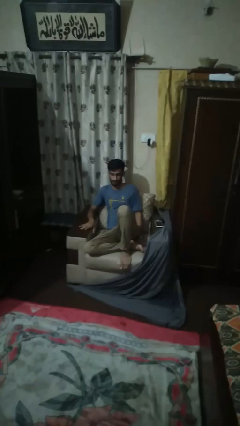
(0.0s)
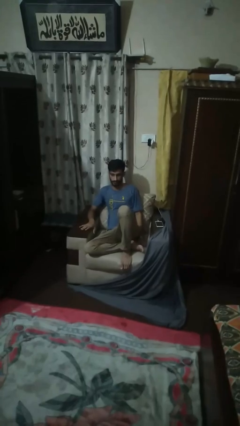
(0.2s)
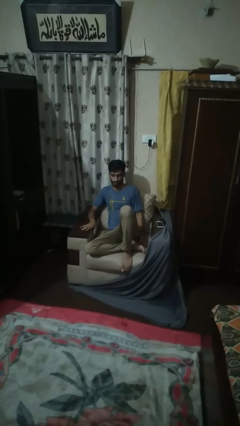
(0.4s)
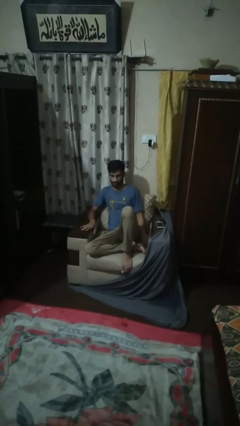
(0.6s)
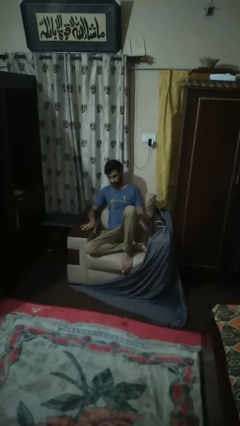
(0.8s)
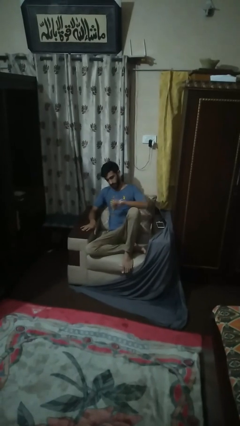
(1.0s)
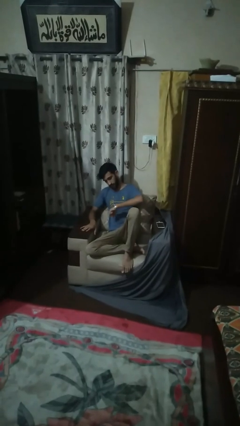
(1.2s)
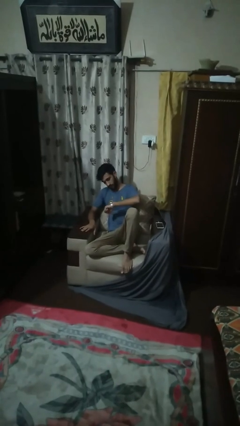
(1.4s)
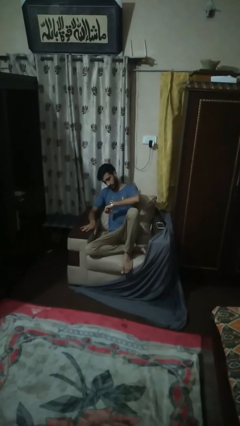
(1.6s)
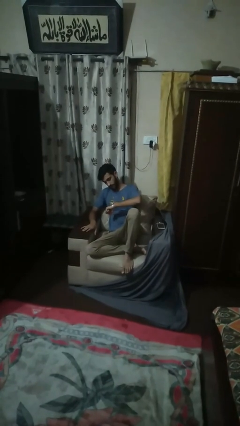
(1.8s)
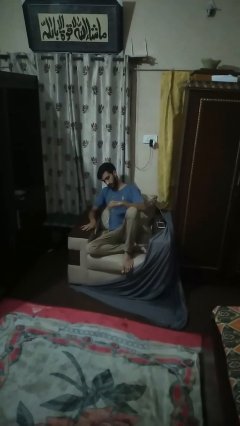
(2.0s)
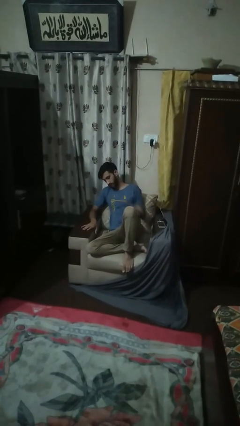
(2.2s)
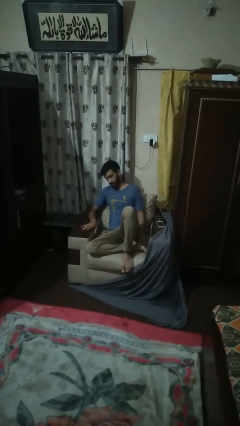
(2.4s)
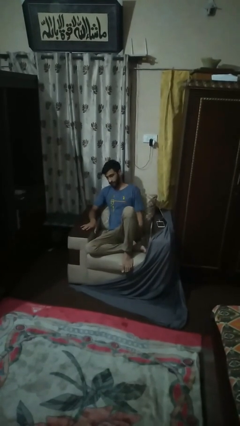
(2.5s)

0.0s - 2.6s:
person looks at wristwatch

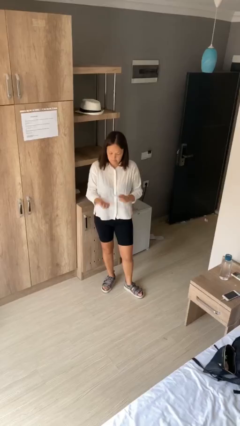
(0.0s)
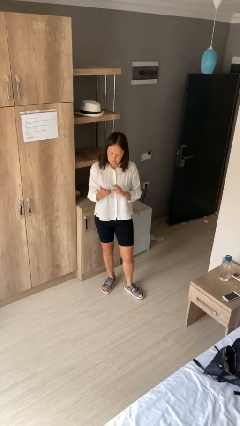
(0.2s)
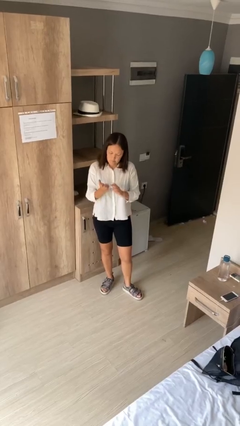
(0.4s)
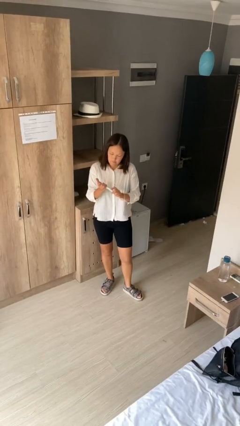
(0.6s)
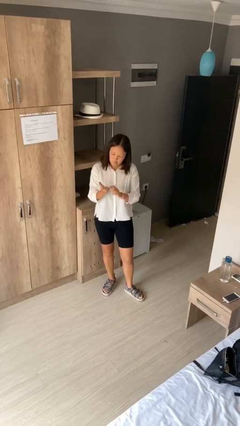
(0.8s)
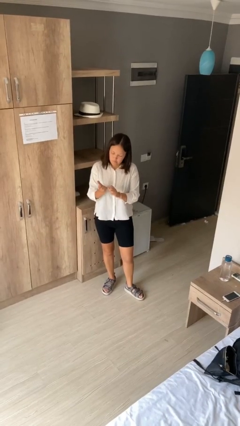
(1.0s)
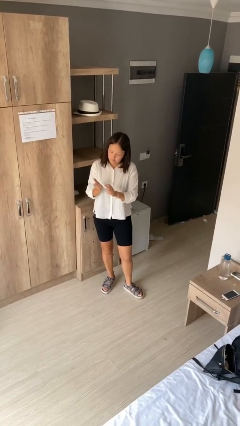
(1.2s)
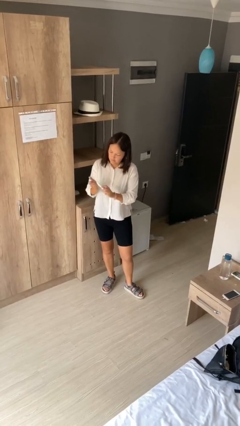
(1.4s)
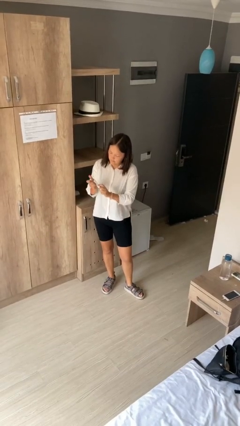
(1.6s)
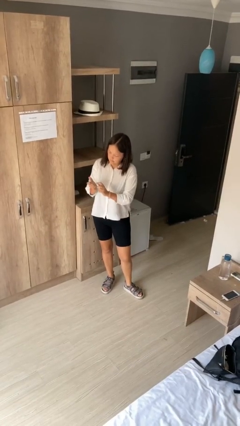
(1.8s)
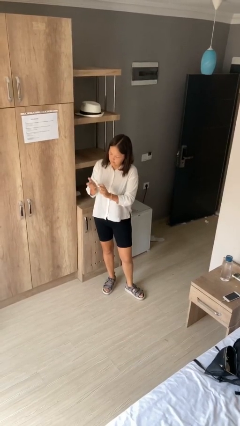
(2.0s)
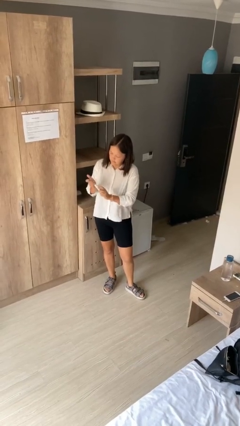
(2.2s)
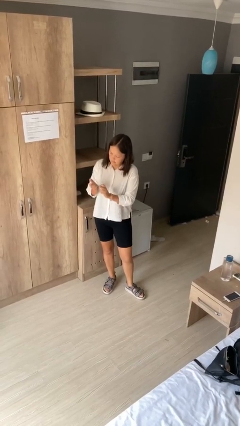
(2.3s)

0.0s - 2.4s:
person files fingernails

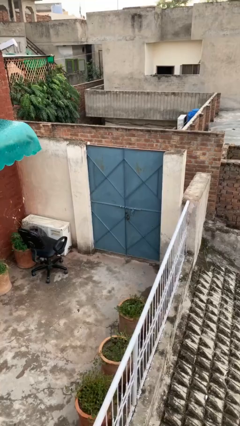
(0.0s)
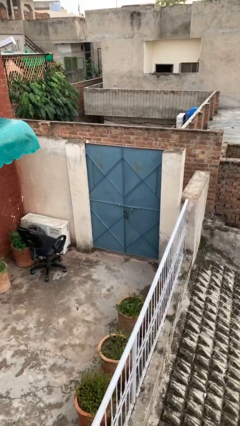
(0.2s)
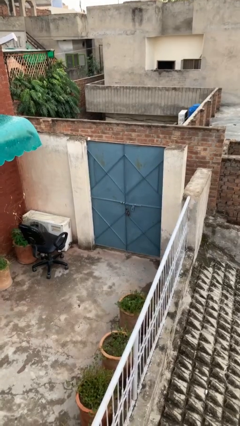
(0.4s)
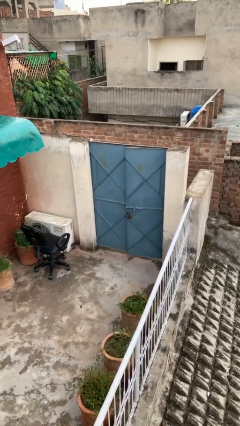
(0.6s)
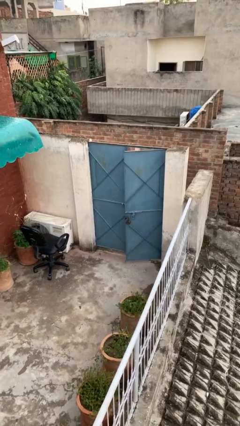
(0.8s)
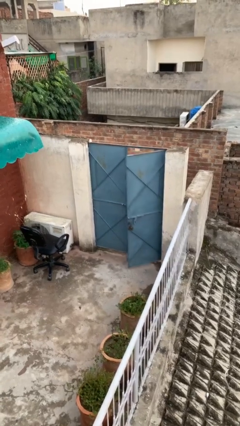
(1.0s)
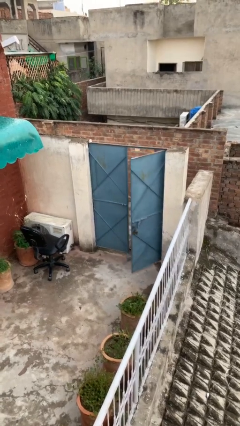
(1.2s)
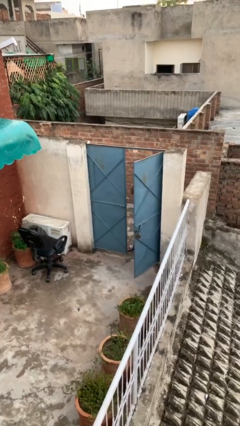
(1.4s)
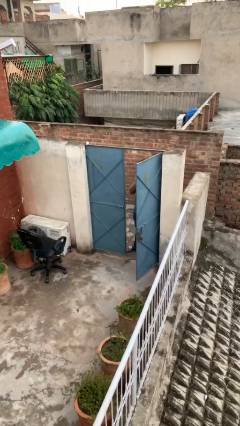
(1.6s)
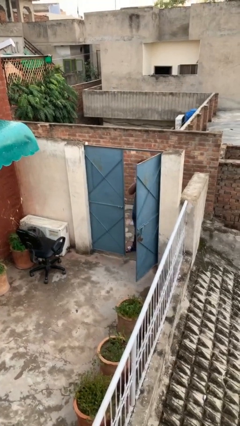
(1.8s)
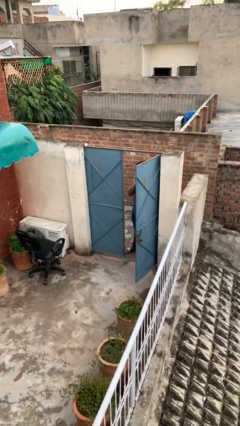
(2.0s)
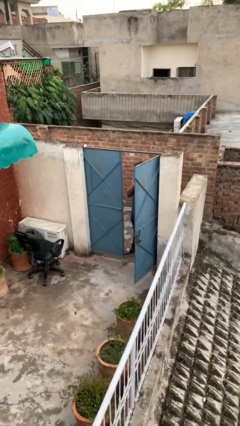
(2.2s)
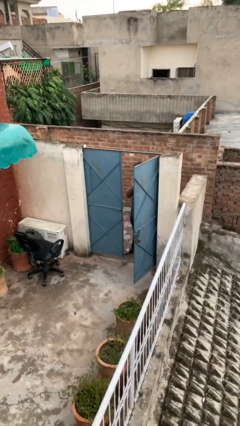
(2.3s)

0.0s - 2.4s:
person opens facility door

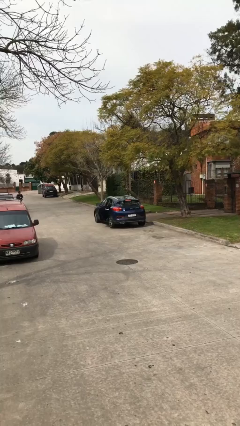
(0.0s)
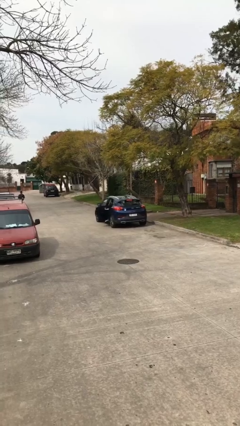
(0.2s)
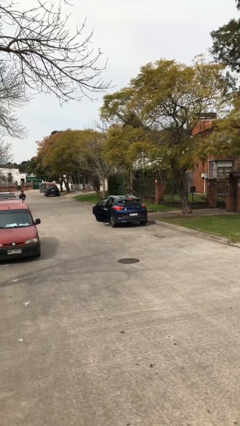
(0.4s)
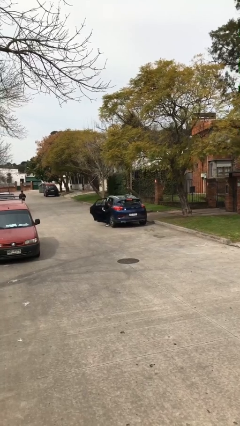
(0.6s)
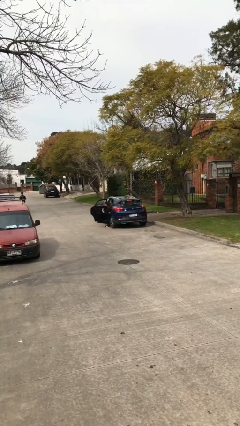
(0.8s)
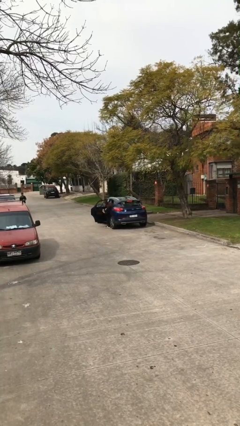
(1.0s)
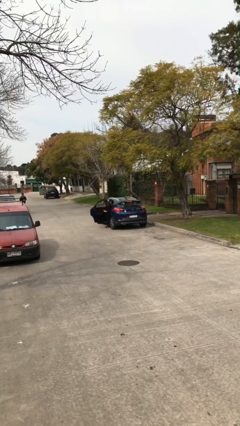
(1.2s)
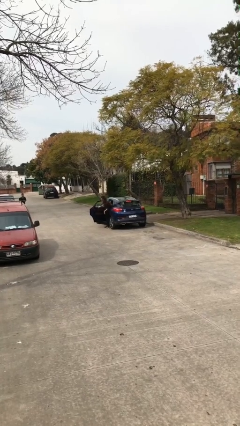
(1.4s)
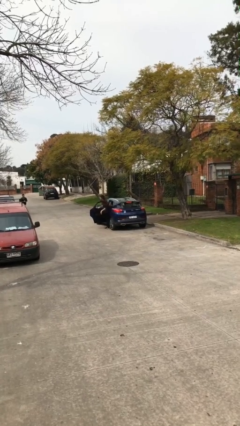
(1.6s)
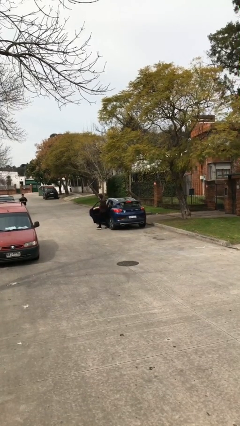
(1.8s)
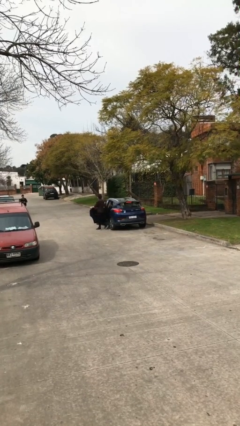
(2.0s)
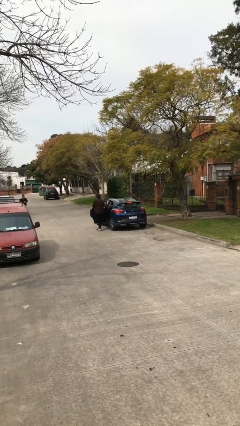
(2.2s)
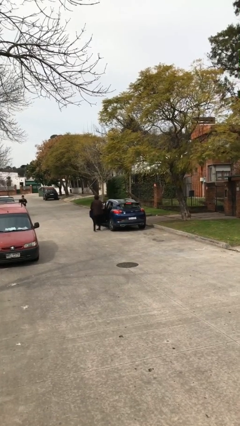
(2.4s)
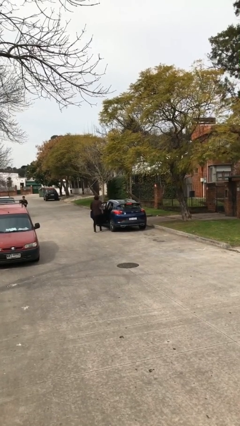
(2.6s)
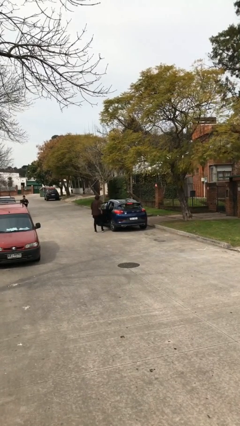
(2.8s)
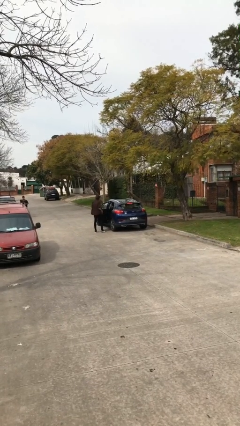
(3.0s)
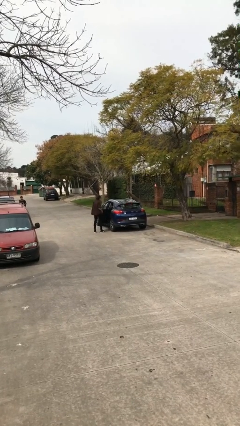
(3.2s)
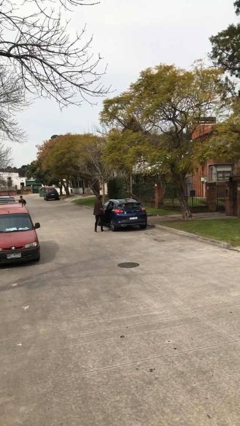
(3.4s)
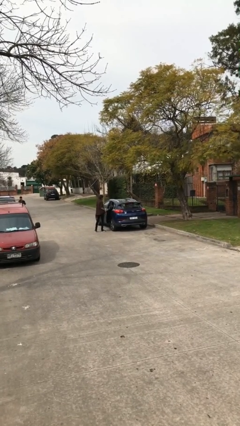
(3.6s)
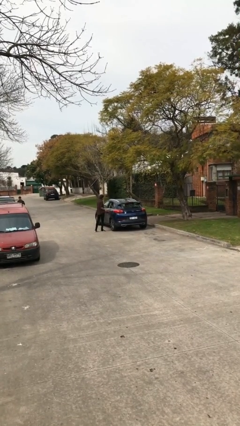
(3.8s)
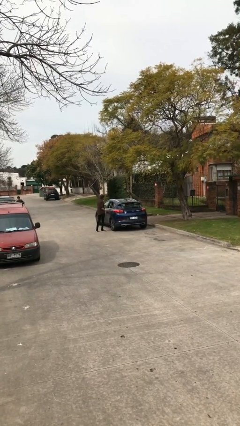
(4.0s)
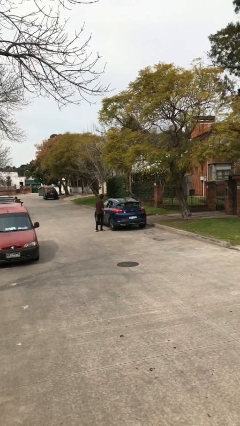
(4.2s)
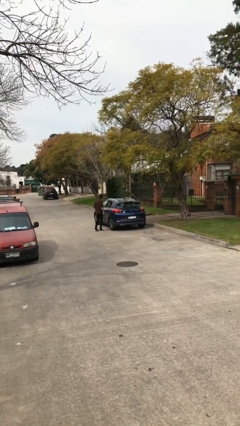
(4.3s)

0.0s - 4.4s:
car drops off person

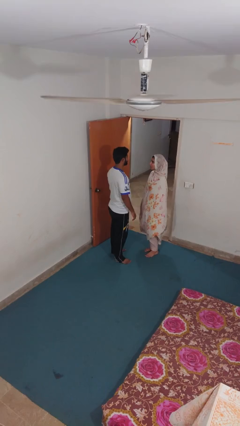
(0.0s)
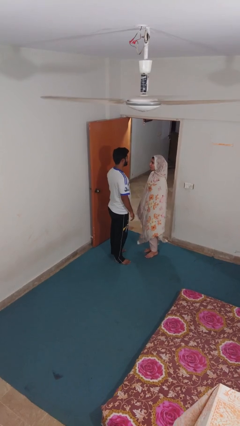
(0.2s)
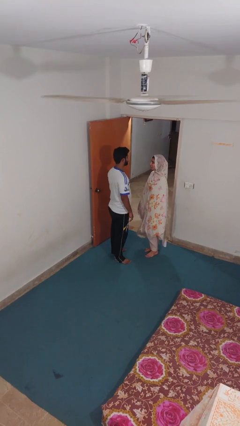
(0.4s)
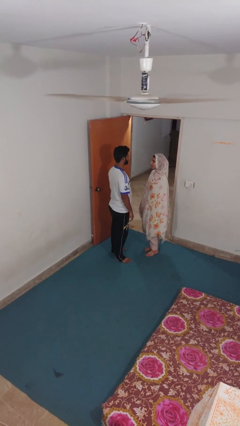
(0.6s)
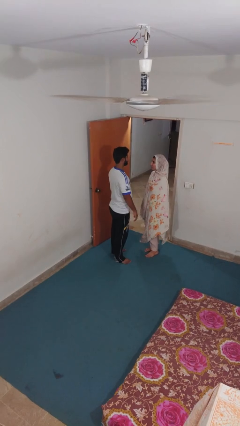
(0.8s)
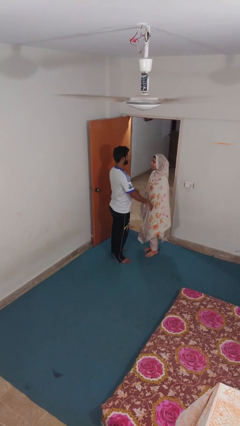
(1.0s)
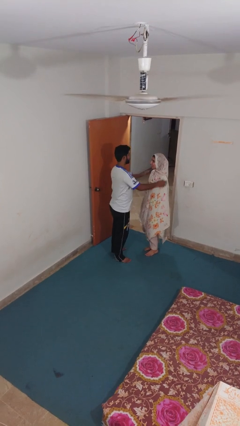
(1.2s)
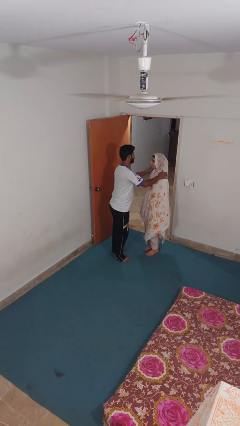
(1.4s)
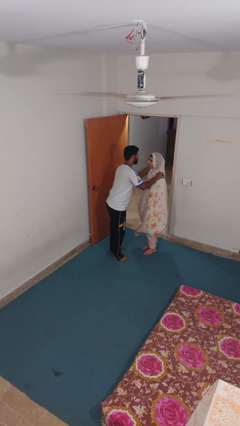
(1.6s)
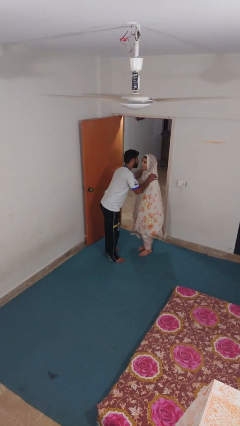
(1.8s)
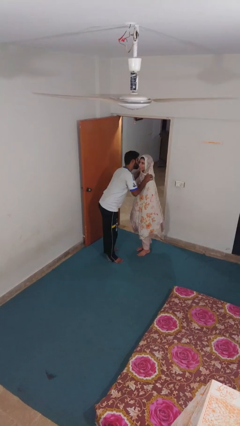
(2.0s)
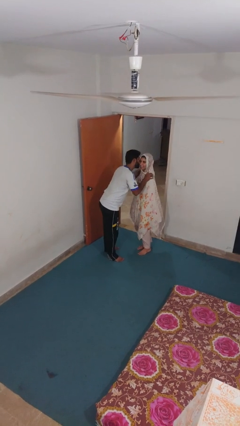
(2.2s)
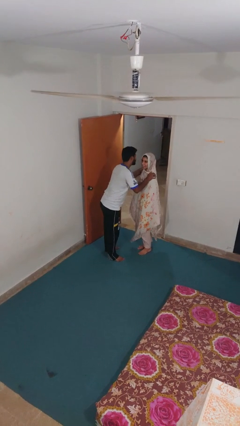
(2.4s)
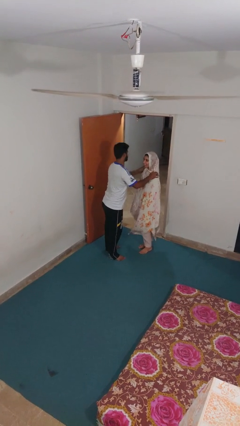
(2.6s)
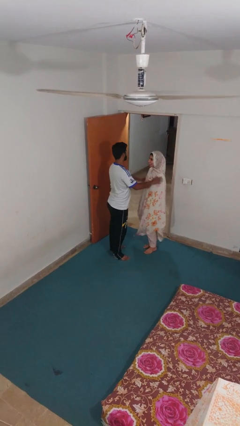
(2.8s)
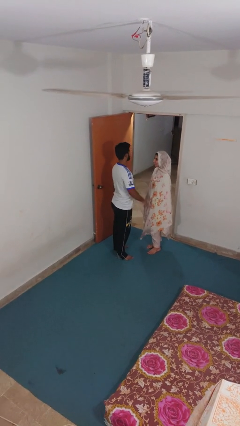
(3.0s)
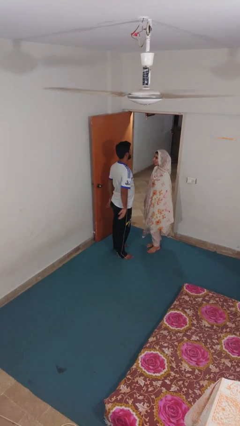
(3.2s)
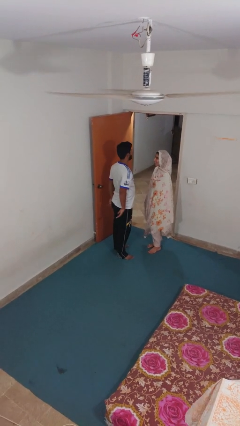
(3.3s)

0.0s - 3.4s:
person kisses cheek of person

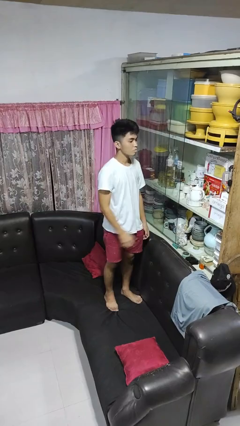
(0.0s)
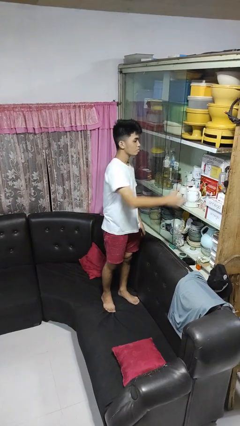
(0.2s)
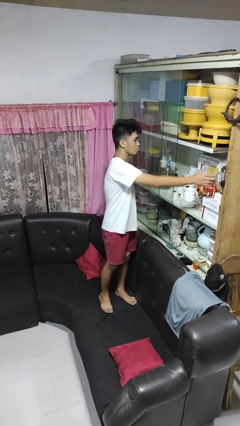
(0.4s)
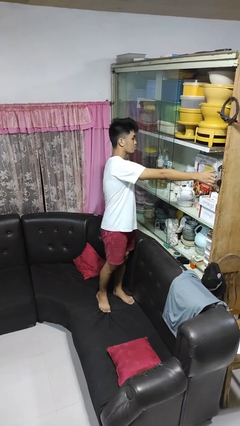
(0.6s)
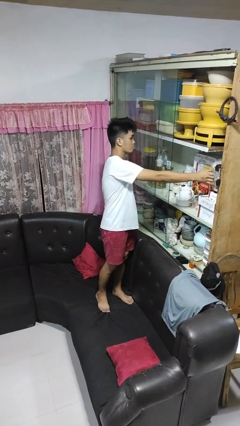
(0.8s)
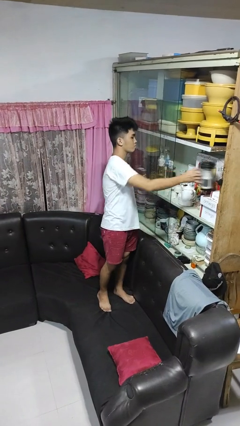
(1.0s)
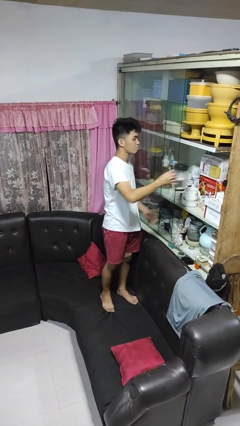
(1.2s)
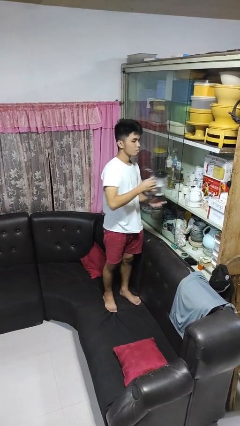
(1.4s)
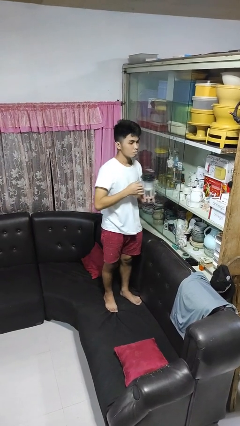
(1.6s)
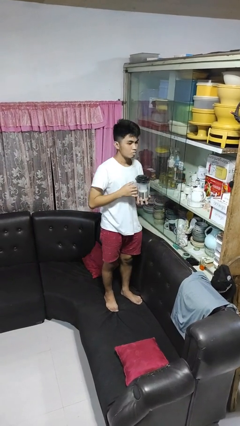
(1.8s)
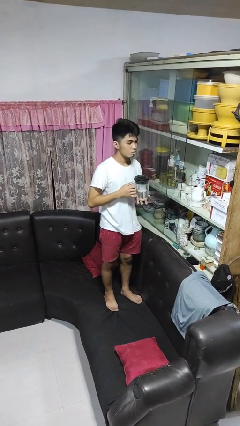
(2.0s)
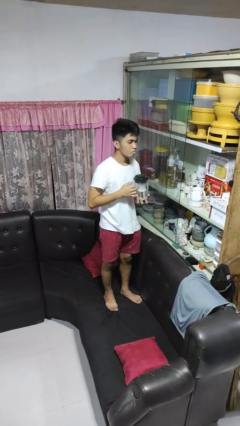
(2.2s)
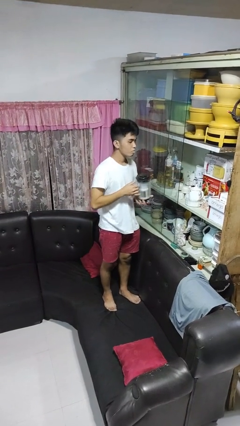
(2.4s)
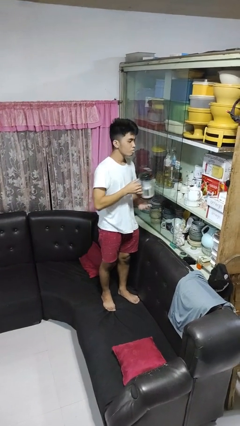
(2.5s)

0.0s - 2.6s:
person picks up object from cabinet
